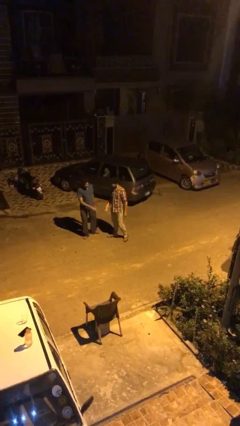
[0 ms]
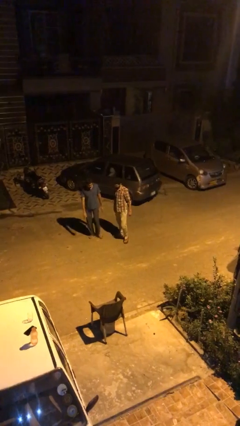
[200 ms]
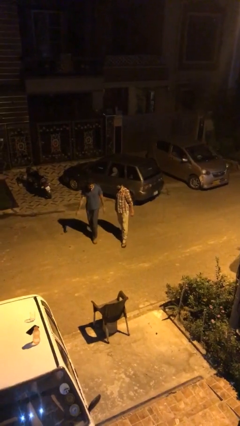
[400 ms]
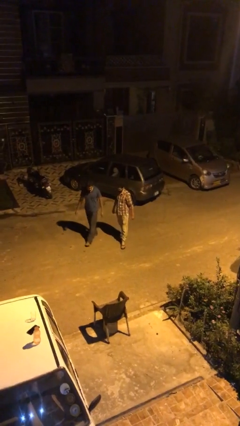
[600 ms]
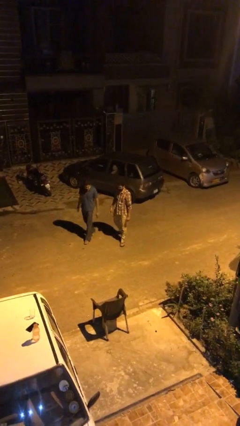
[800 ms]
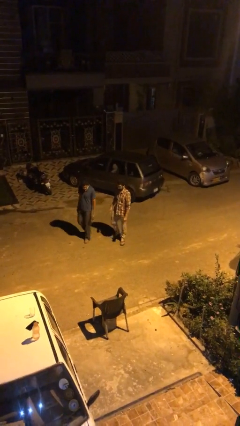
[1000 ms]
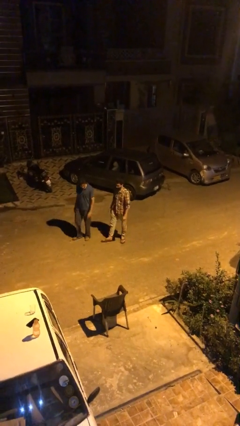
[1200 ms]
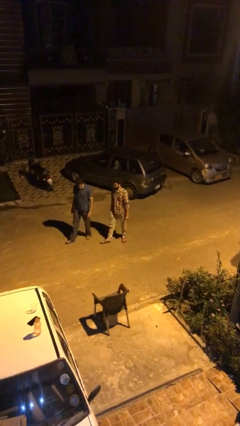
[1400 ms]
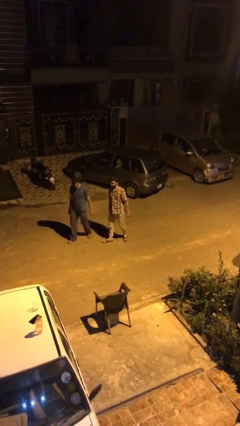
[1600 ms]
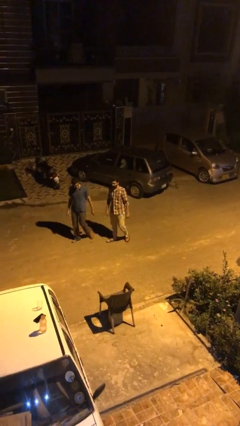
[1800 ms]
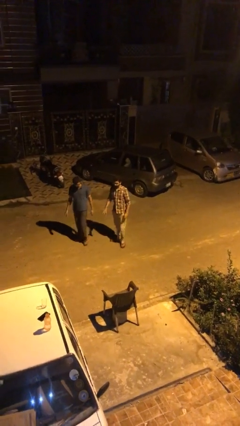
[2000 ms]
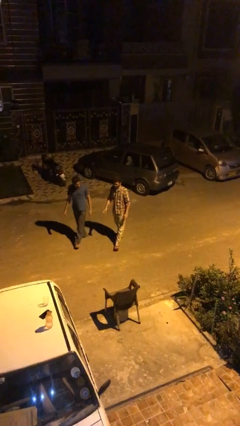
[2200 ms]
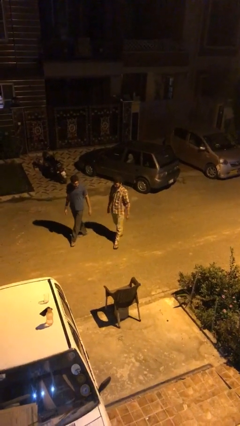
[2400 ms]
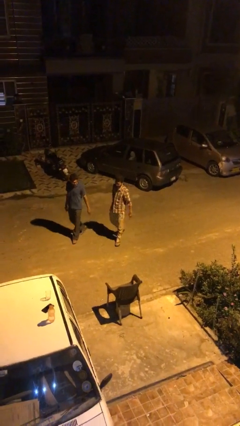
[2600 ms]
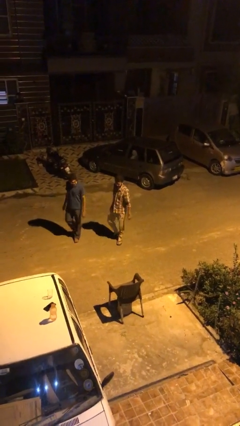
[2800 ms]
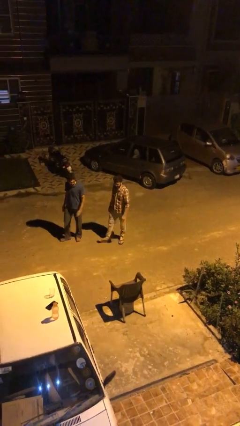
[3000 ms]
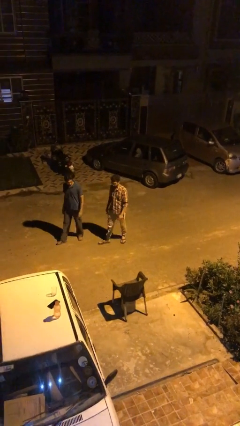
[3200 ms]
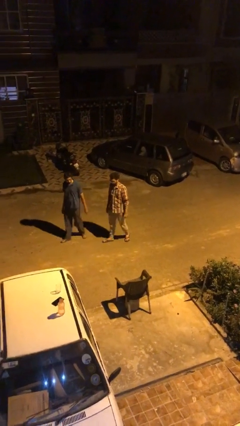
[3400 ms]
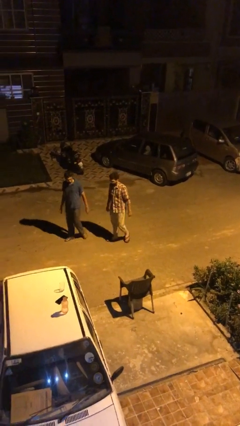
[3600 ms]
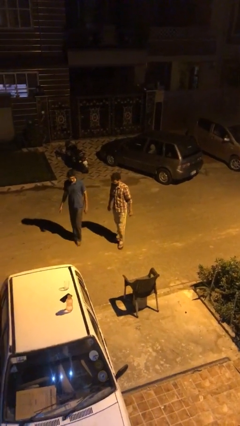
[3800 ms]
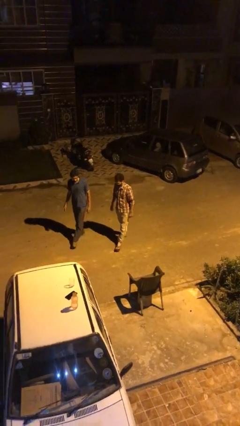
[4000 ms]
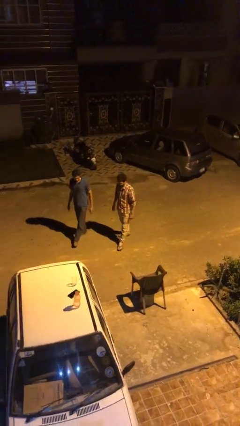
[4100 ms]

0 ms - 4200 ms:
person talks to person

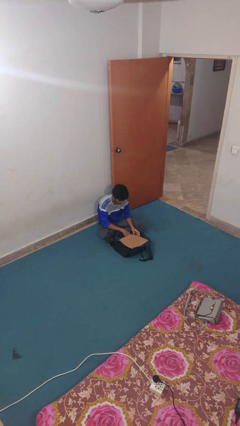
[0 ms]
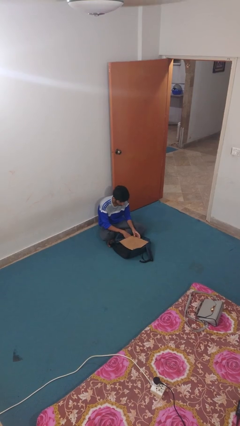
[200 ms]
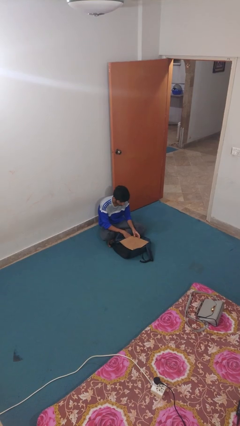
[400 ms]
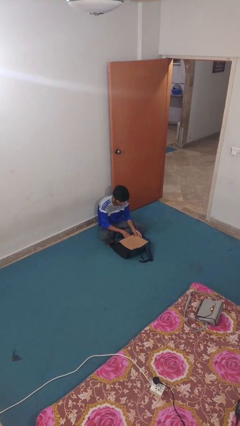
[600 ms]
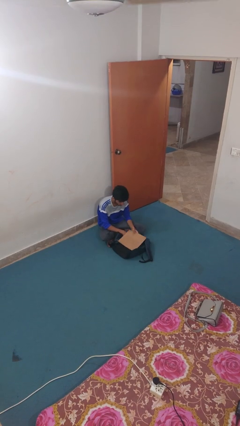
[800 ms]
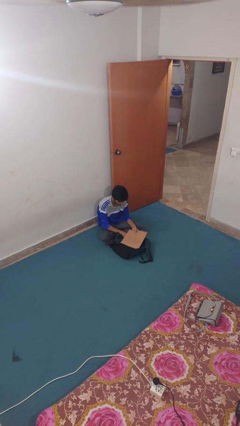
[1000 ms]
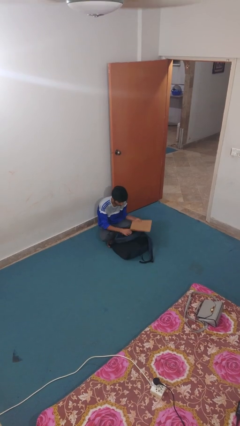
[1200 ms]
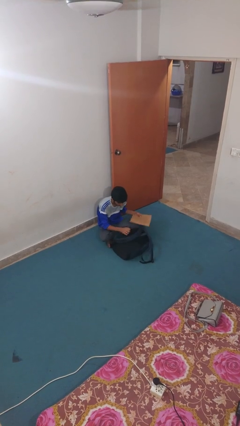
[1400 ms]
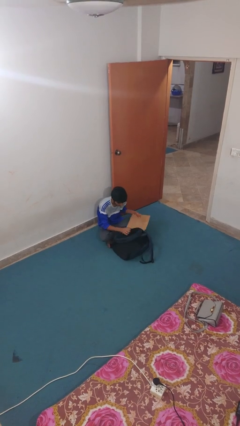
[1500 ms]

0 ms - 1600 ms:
person puts object into backpack

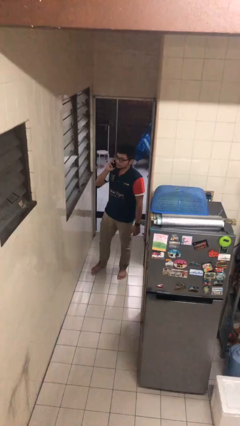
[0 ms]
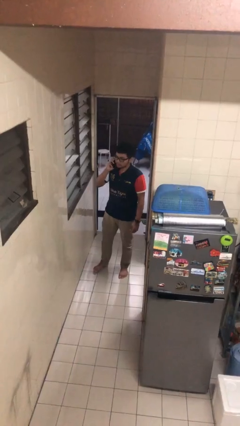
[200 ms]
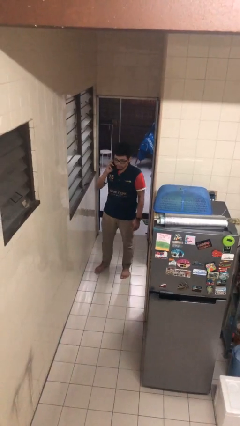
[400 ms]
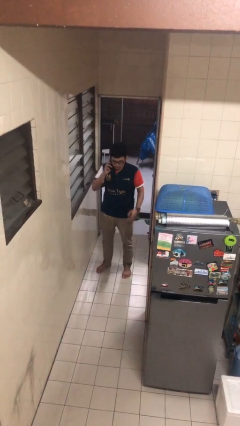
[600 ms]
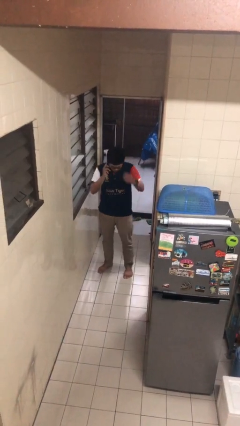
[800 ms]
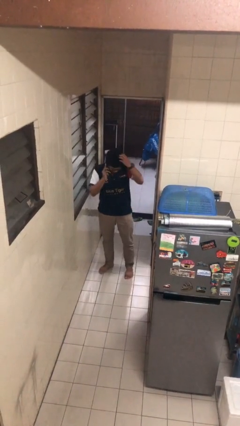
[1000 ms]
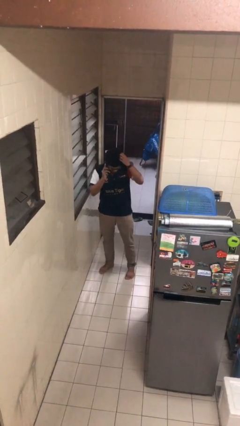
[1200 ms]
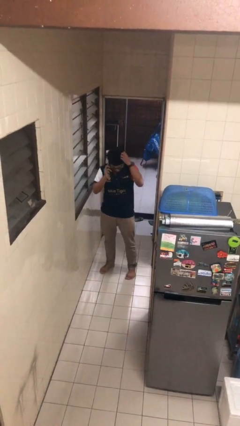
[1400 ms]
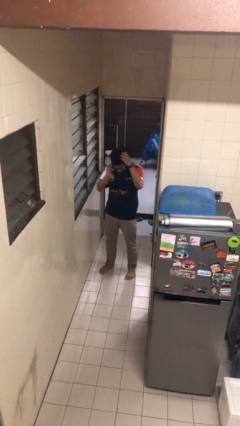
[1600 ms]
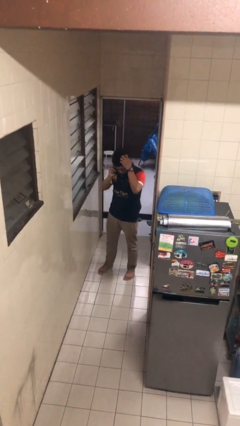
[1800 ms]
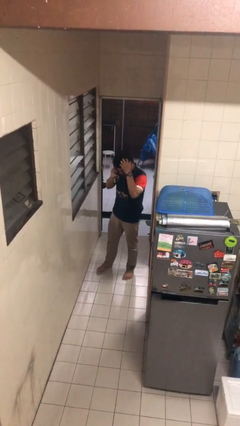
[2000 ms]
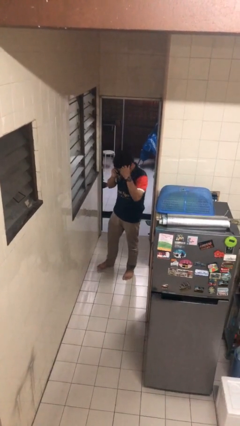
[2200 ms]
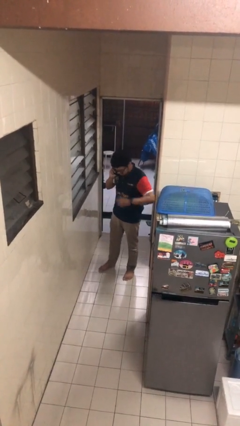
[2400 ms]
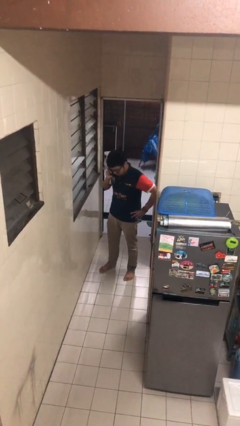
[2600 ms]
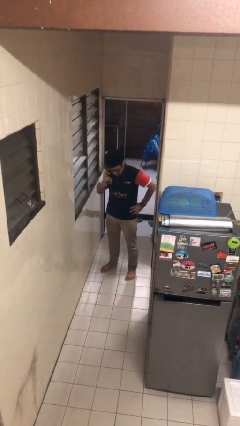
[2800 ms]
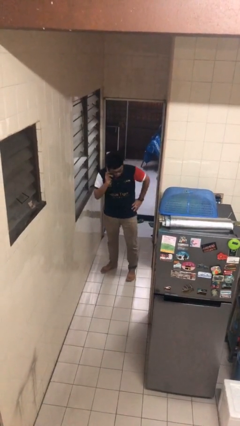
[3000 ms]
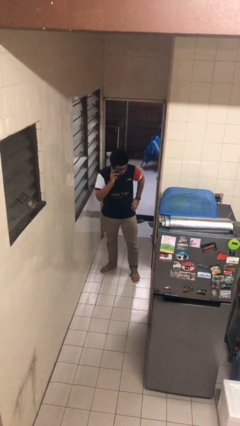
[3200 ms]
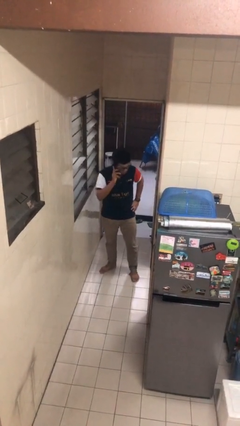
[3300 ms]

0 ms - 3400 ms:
person talks on phone

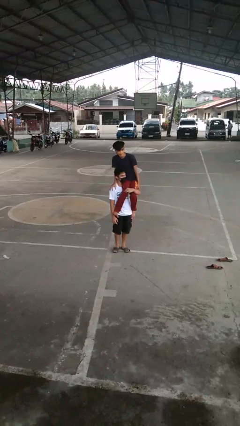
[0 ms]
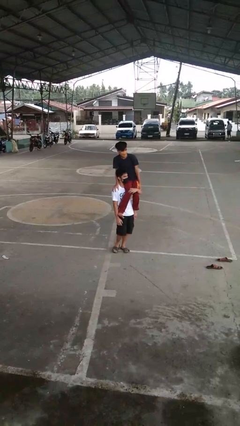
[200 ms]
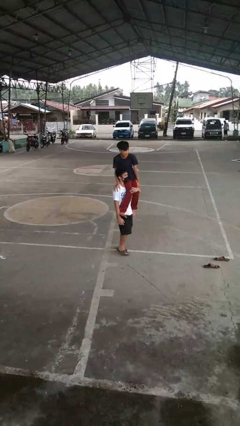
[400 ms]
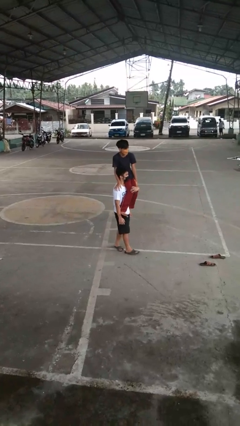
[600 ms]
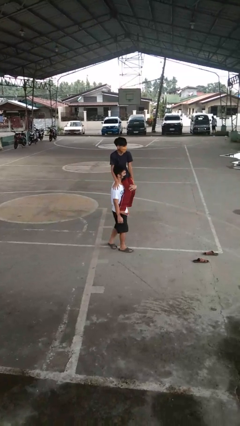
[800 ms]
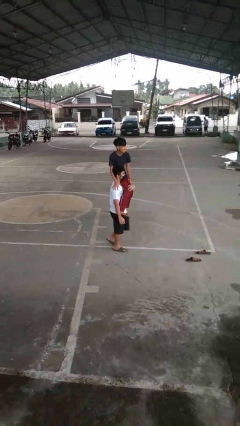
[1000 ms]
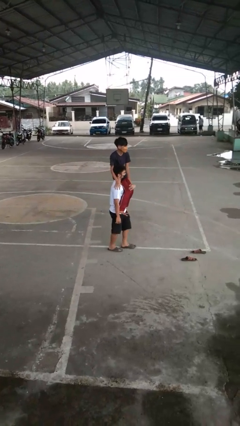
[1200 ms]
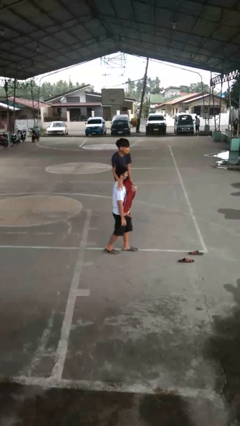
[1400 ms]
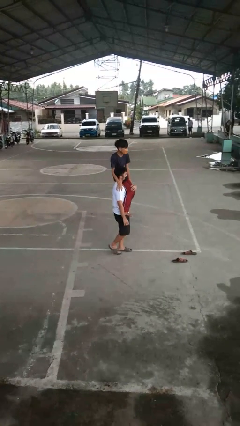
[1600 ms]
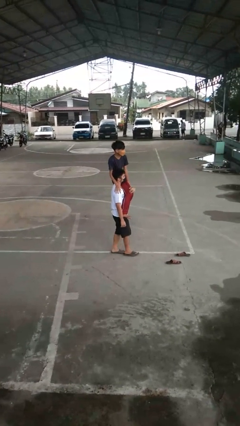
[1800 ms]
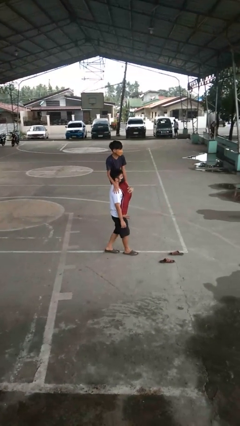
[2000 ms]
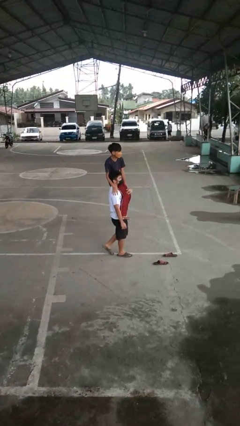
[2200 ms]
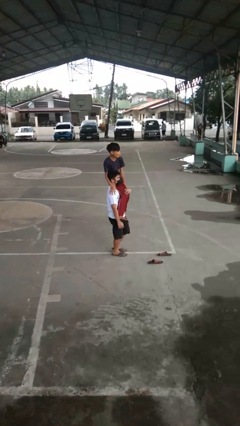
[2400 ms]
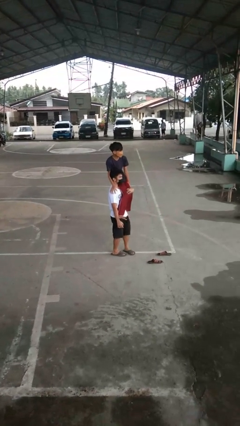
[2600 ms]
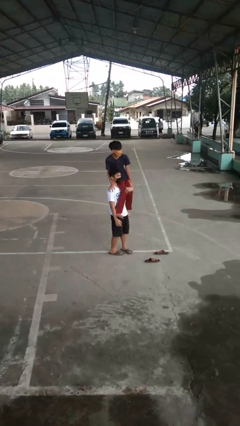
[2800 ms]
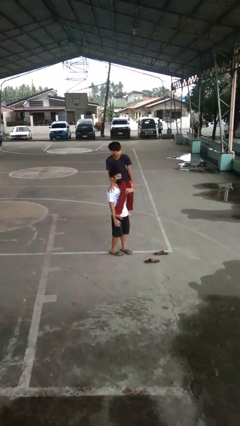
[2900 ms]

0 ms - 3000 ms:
person carries person on shoulders

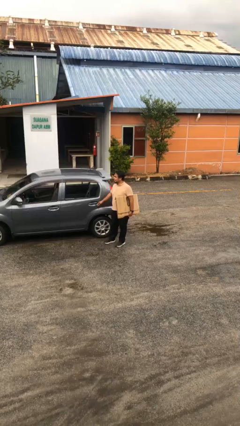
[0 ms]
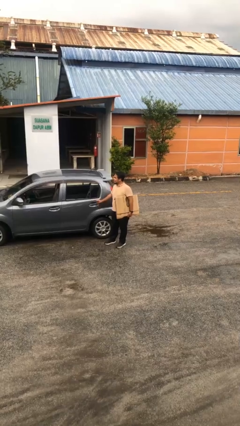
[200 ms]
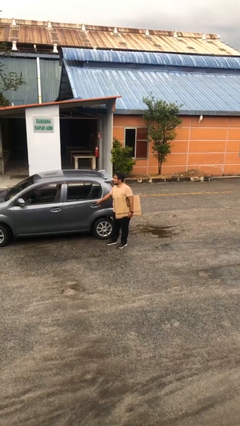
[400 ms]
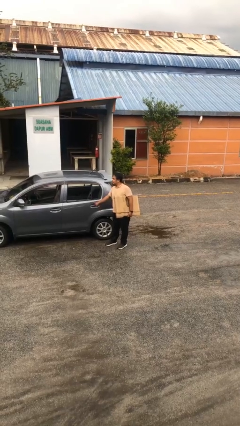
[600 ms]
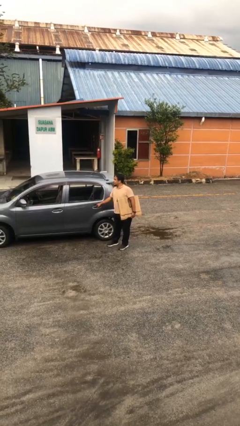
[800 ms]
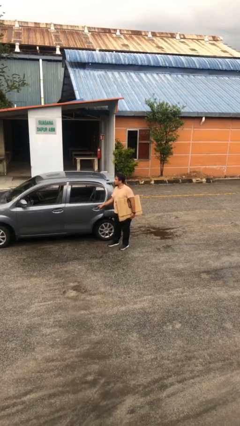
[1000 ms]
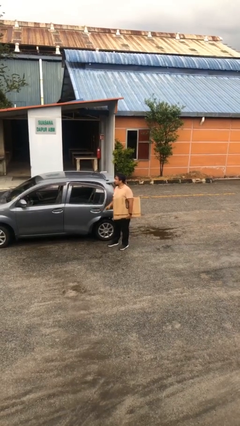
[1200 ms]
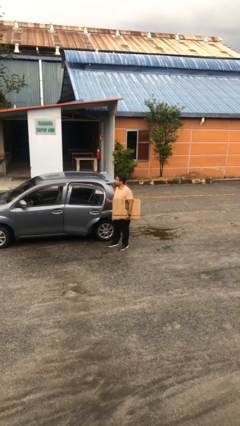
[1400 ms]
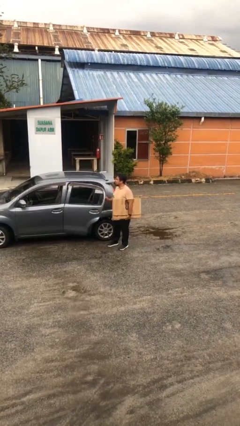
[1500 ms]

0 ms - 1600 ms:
person opens car door

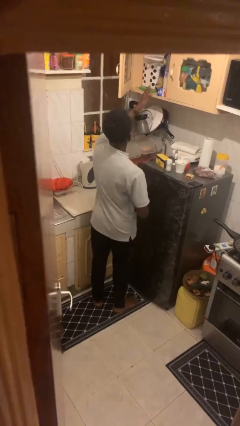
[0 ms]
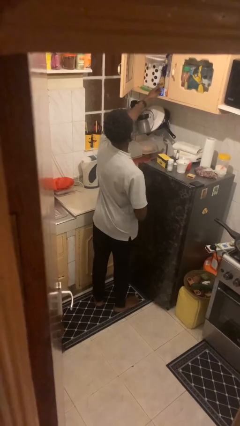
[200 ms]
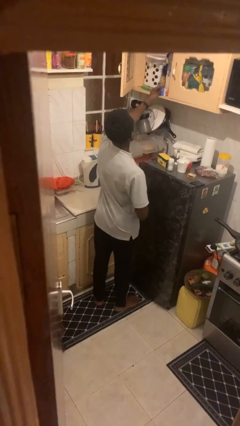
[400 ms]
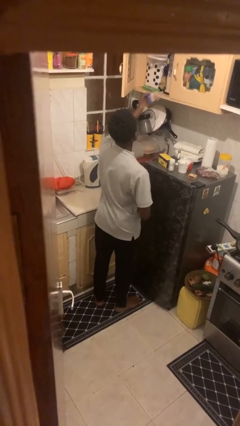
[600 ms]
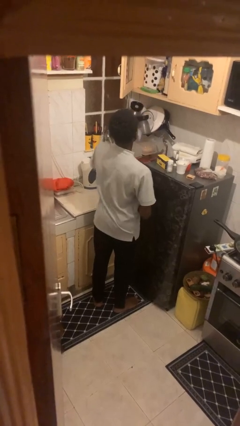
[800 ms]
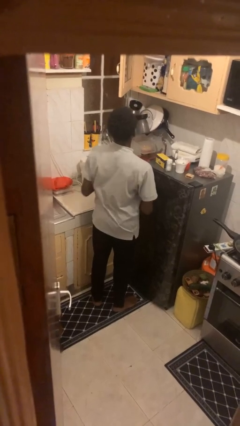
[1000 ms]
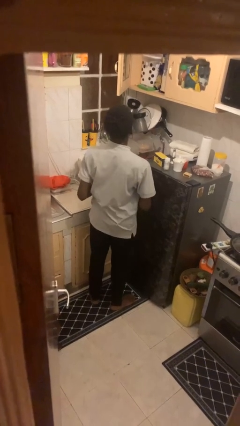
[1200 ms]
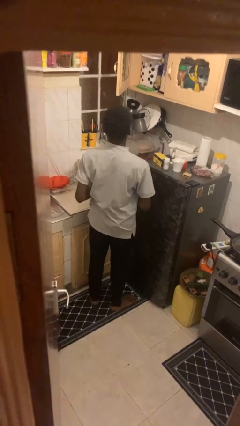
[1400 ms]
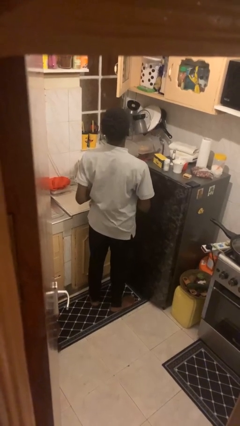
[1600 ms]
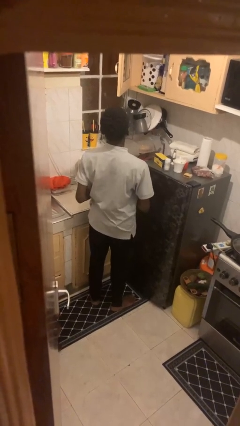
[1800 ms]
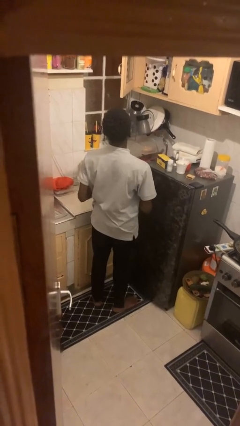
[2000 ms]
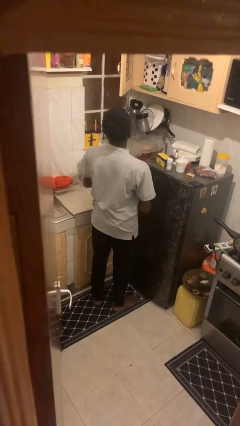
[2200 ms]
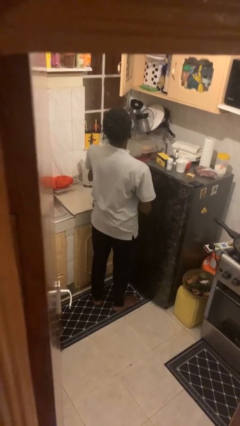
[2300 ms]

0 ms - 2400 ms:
person picks up object from cabinet

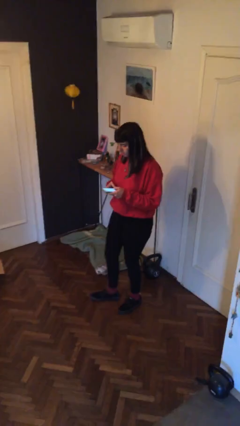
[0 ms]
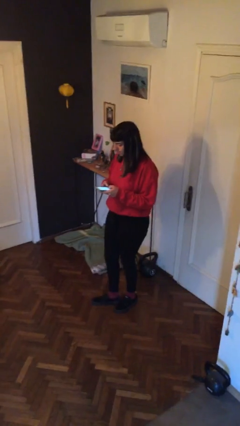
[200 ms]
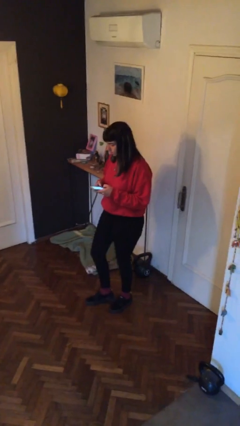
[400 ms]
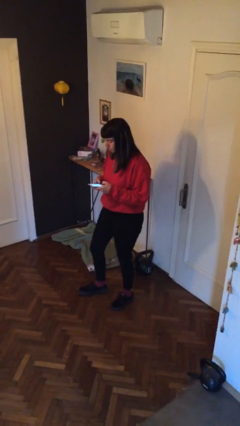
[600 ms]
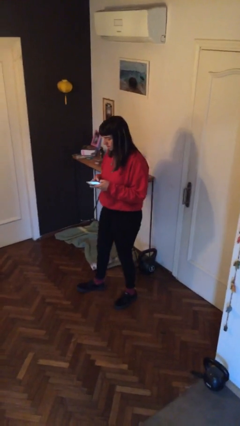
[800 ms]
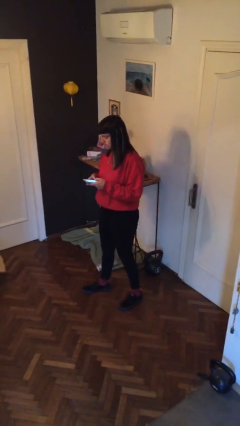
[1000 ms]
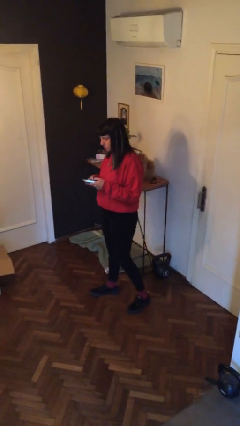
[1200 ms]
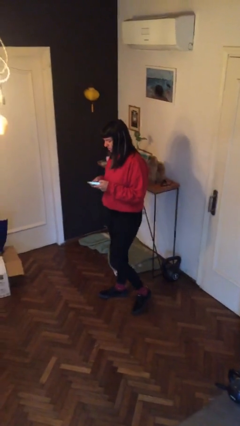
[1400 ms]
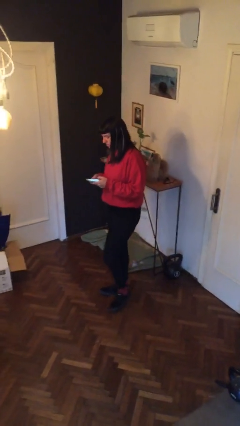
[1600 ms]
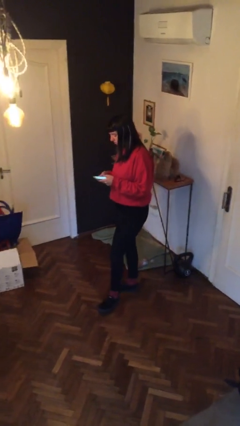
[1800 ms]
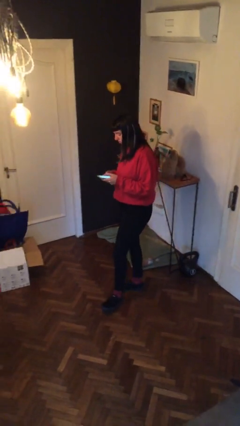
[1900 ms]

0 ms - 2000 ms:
person texts on phone
